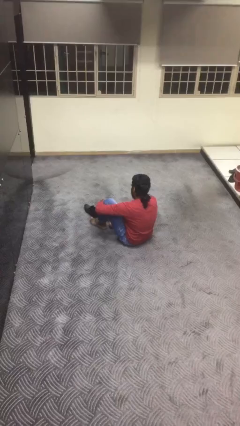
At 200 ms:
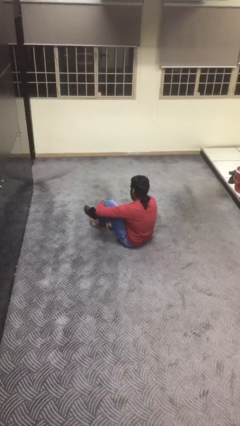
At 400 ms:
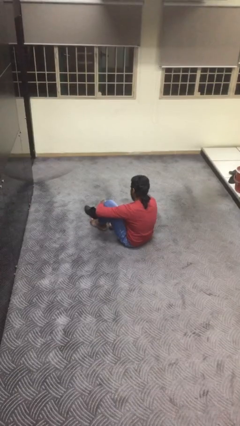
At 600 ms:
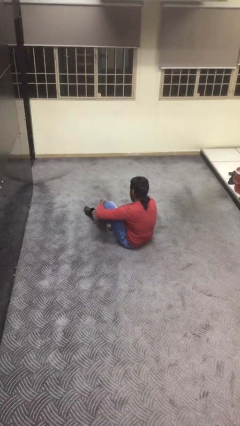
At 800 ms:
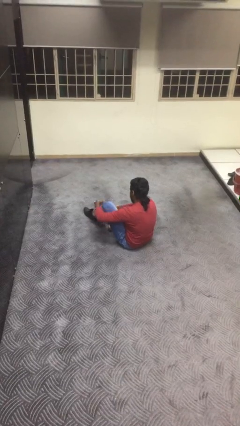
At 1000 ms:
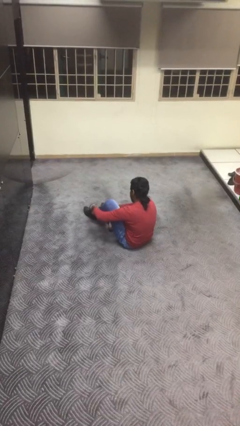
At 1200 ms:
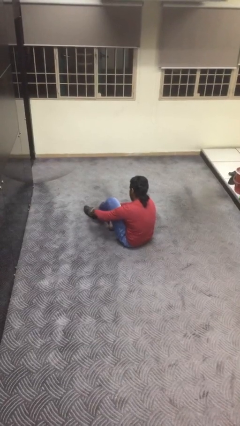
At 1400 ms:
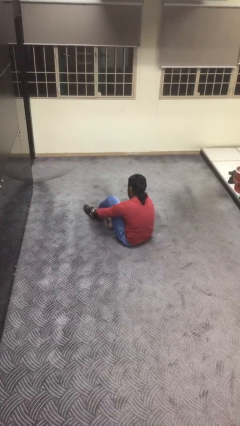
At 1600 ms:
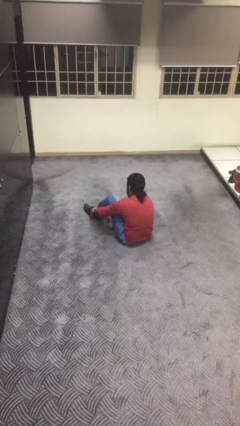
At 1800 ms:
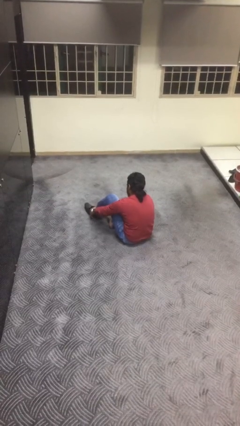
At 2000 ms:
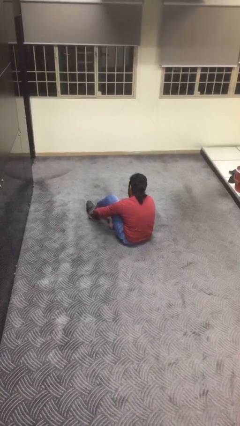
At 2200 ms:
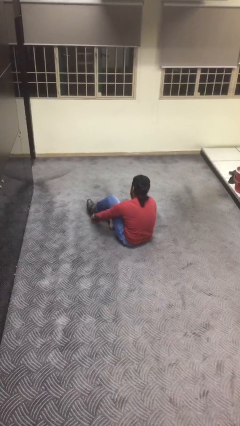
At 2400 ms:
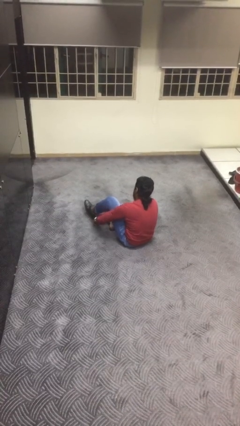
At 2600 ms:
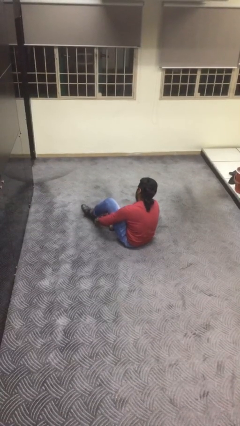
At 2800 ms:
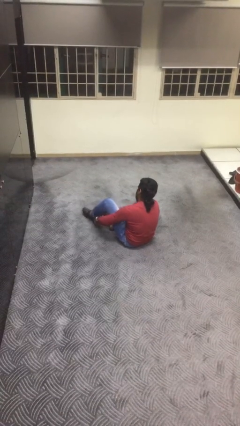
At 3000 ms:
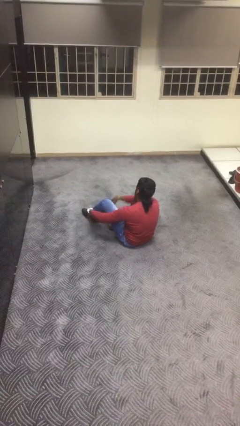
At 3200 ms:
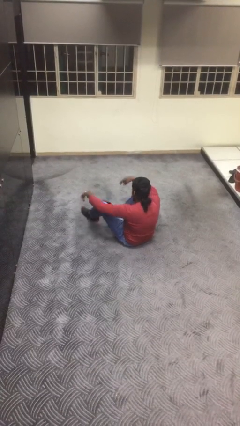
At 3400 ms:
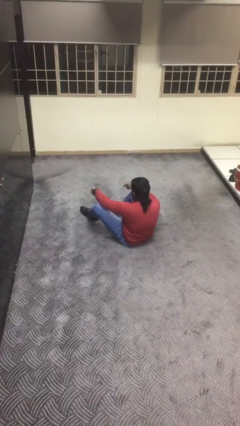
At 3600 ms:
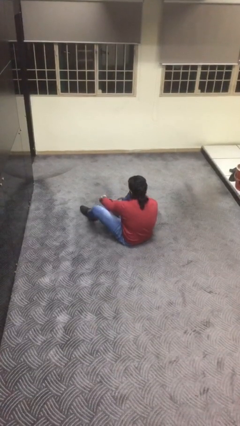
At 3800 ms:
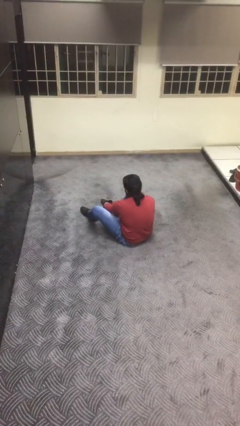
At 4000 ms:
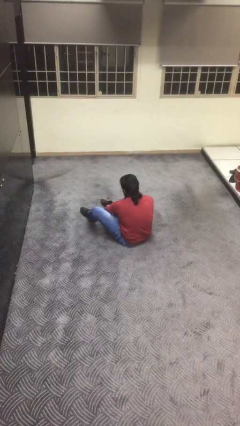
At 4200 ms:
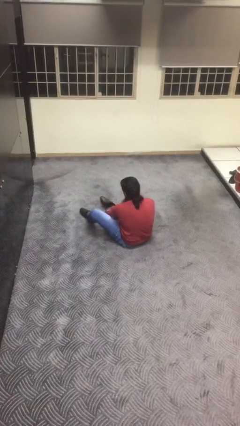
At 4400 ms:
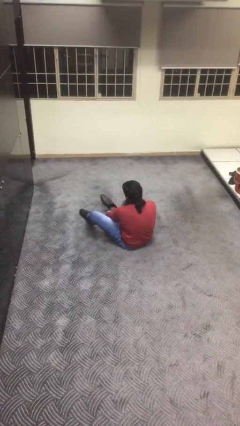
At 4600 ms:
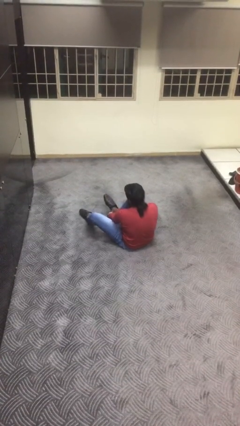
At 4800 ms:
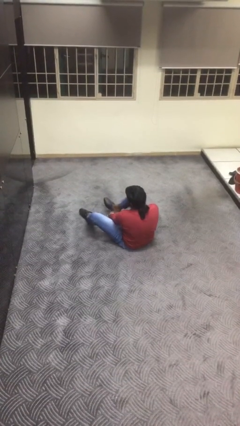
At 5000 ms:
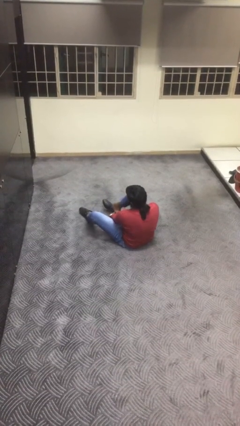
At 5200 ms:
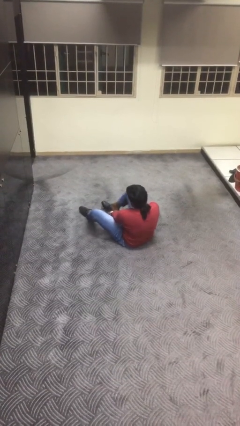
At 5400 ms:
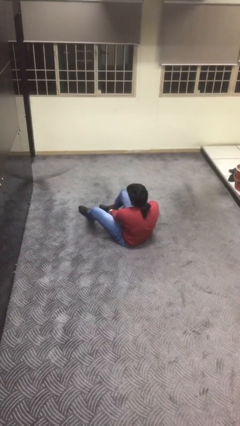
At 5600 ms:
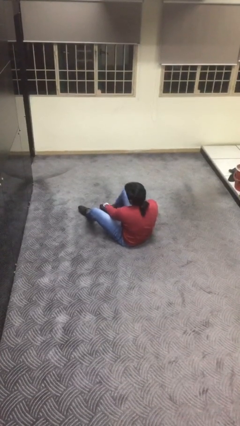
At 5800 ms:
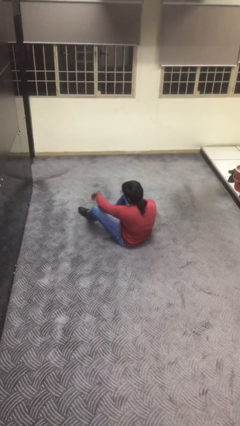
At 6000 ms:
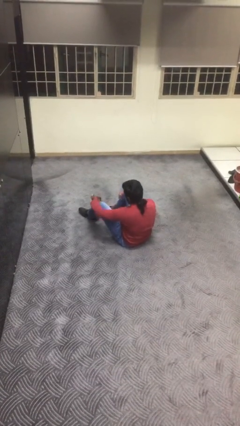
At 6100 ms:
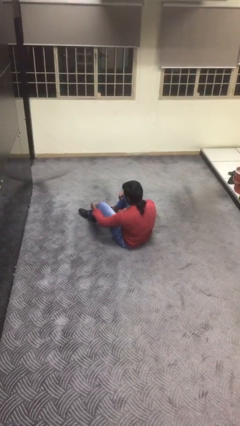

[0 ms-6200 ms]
person puts on shoes

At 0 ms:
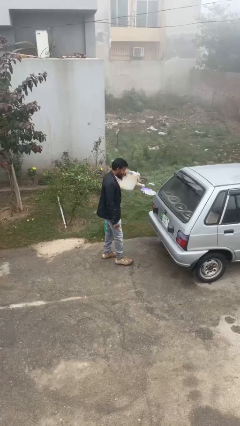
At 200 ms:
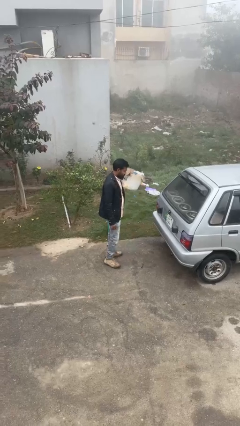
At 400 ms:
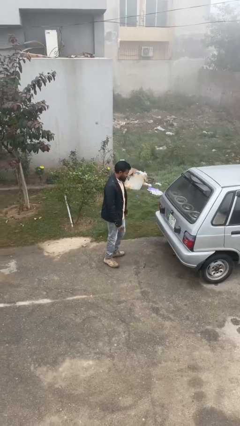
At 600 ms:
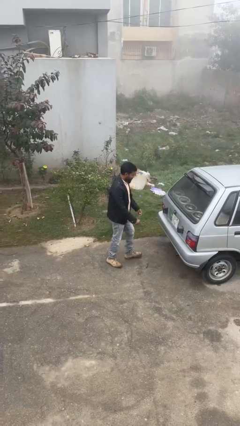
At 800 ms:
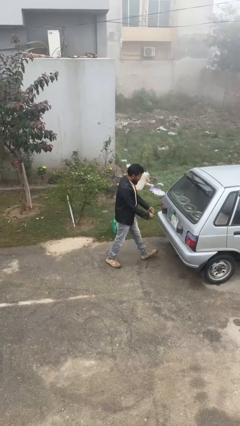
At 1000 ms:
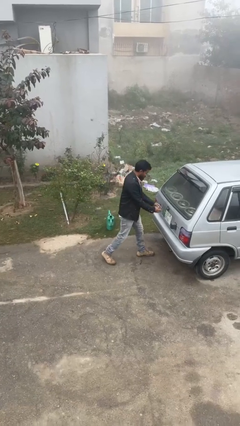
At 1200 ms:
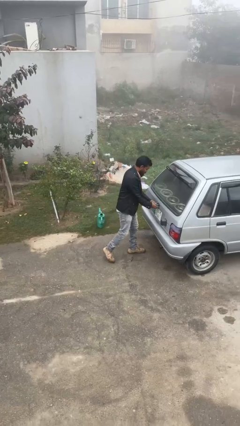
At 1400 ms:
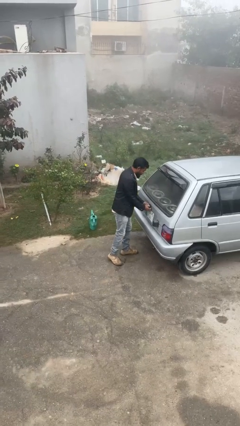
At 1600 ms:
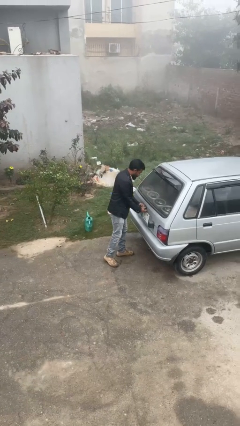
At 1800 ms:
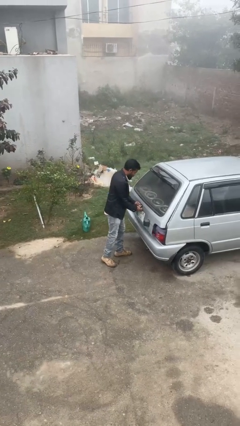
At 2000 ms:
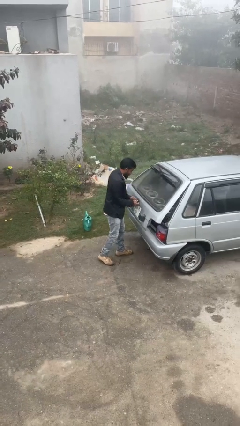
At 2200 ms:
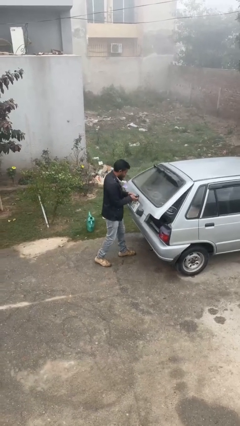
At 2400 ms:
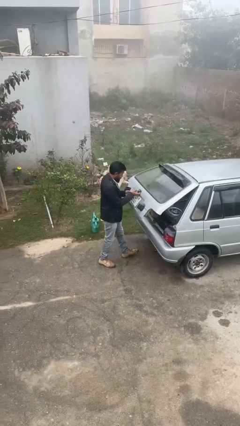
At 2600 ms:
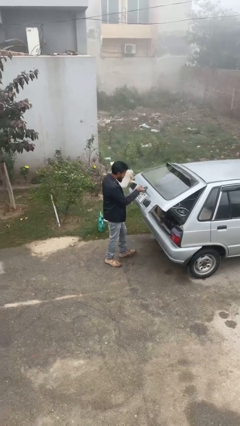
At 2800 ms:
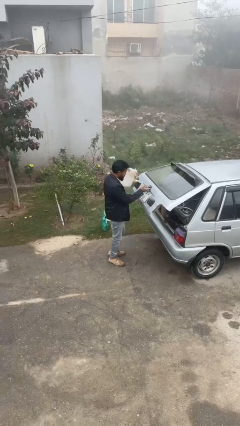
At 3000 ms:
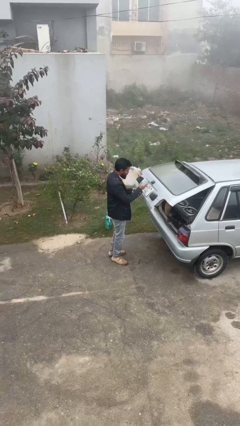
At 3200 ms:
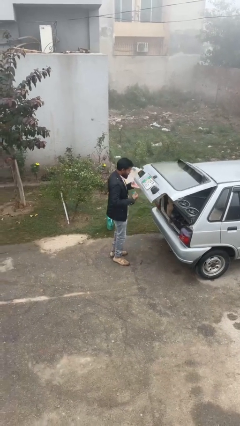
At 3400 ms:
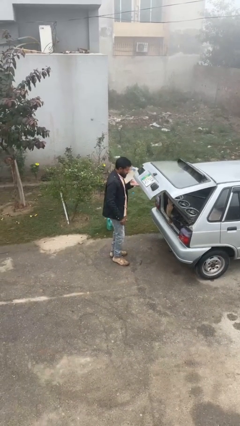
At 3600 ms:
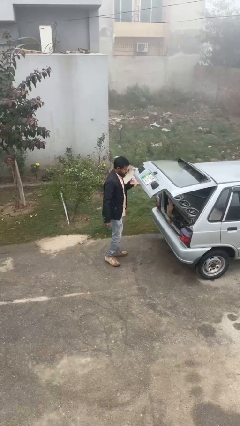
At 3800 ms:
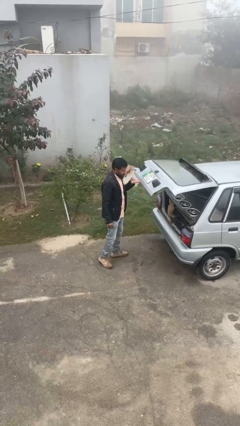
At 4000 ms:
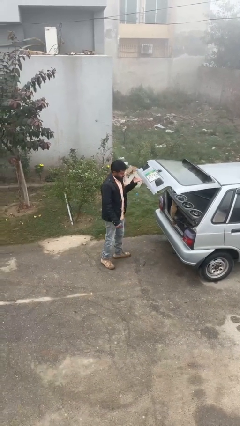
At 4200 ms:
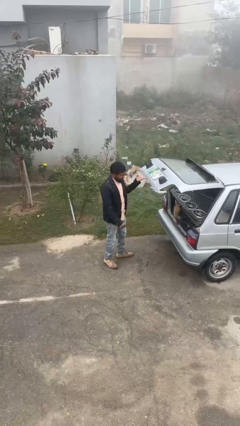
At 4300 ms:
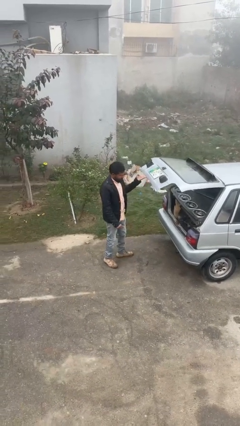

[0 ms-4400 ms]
person opens car trunk

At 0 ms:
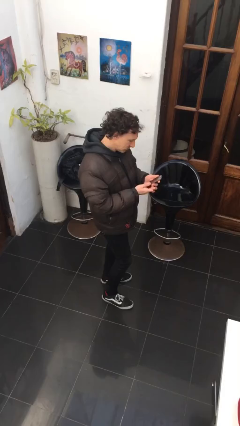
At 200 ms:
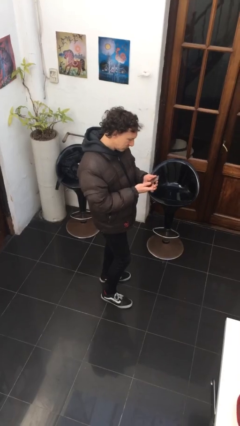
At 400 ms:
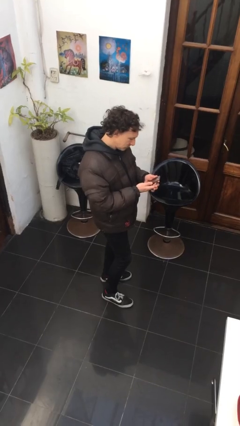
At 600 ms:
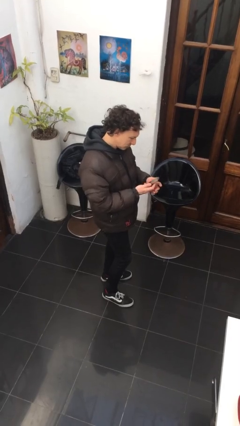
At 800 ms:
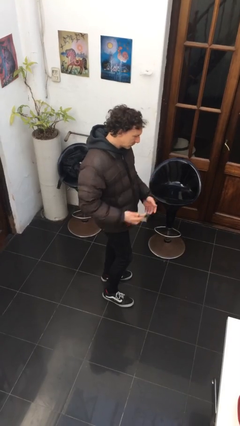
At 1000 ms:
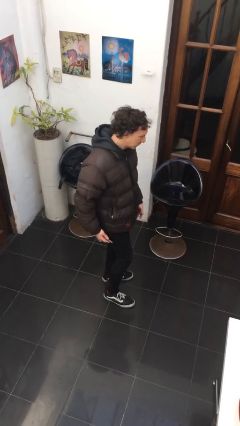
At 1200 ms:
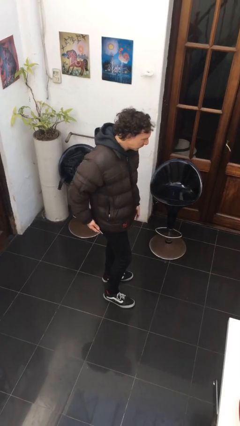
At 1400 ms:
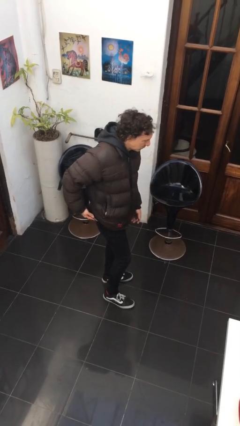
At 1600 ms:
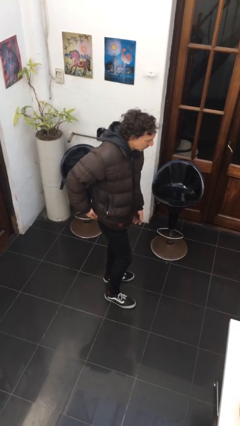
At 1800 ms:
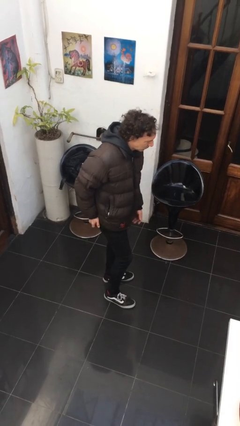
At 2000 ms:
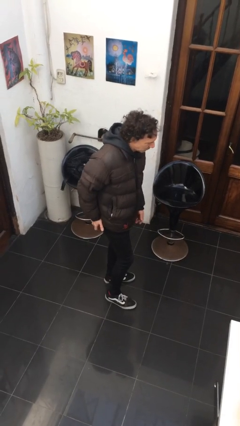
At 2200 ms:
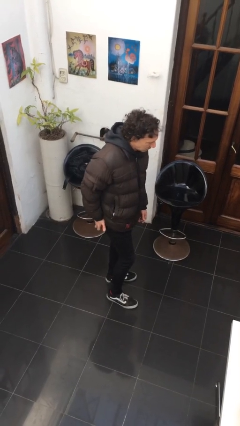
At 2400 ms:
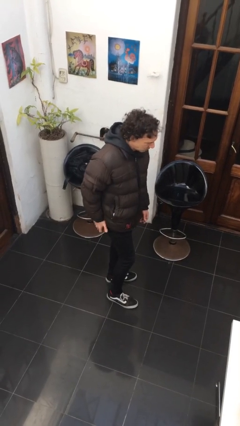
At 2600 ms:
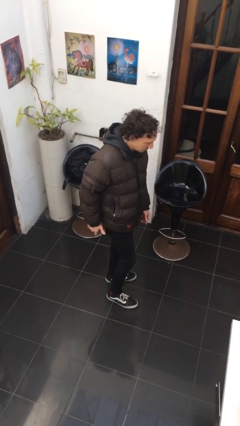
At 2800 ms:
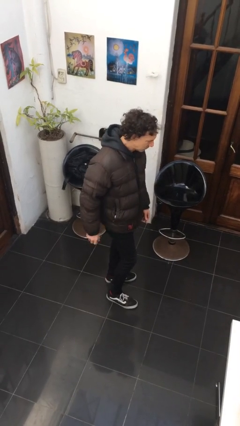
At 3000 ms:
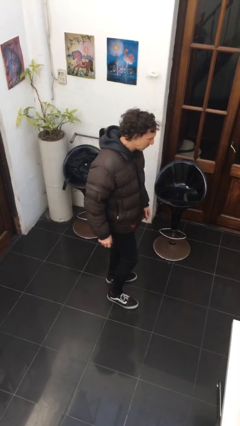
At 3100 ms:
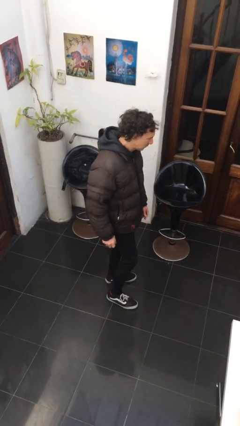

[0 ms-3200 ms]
person puts phone into pocket

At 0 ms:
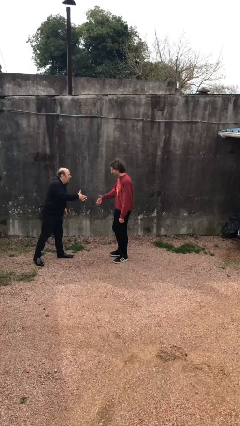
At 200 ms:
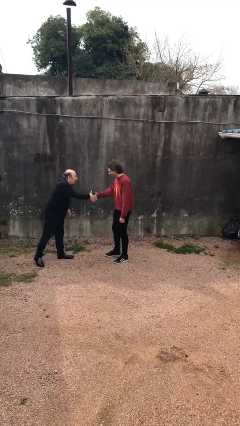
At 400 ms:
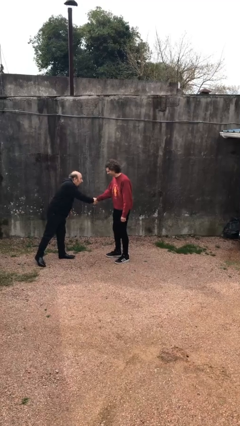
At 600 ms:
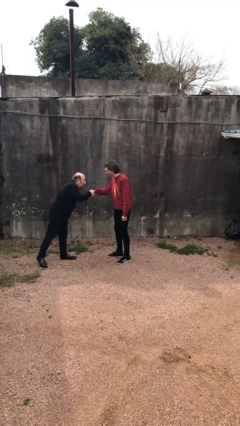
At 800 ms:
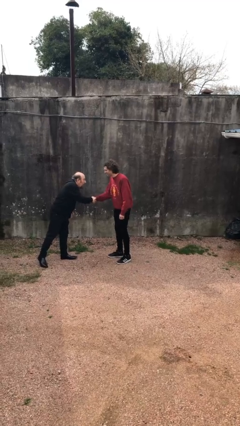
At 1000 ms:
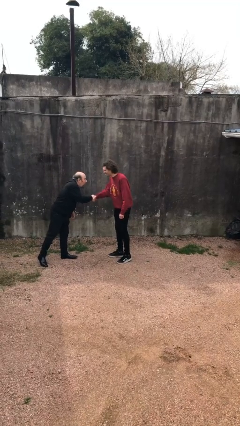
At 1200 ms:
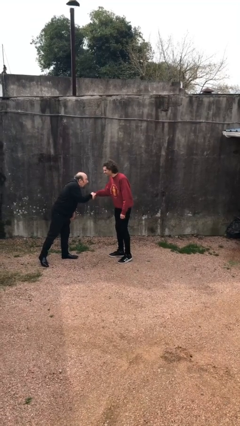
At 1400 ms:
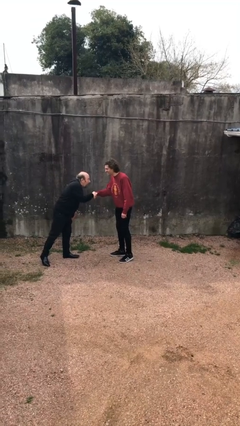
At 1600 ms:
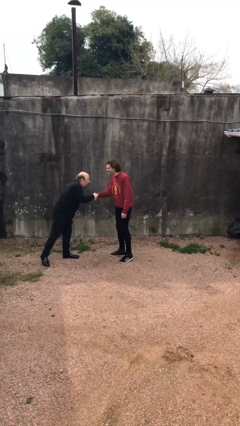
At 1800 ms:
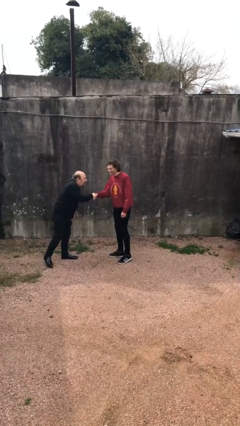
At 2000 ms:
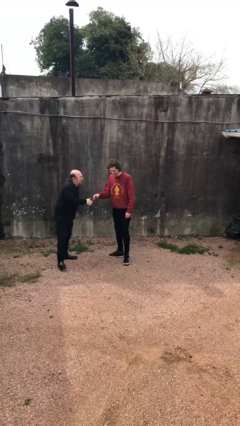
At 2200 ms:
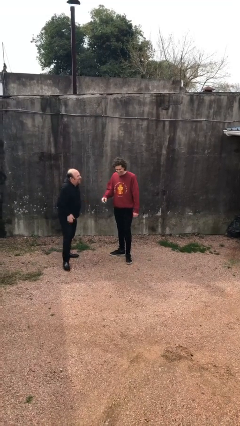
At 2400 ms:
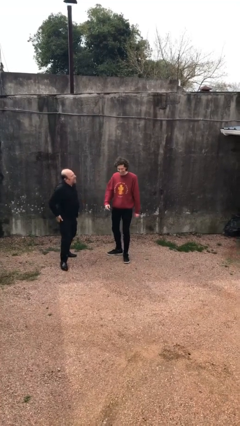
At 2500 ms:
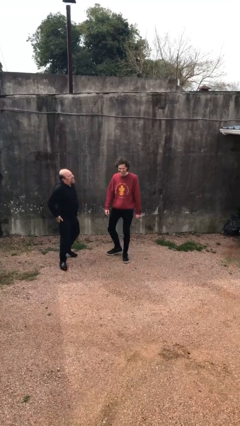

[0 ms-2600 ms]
person shakes hand

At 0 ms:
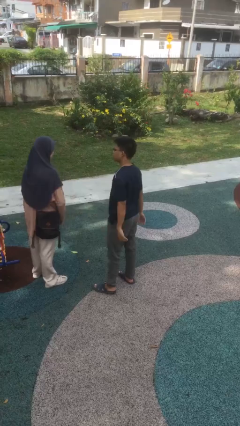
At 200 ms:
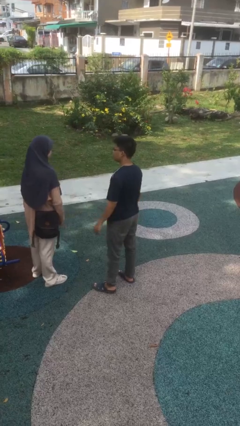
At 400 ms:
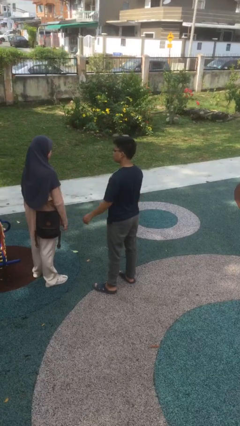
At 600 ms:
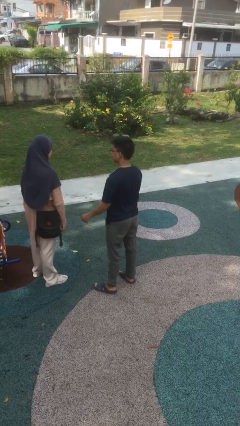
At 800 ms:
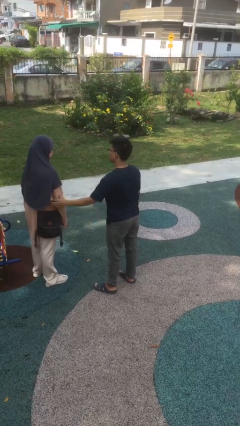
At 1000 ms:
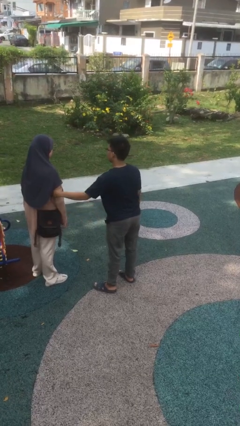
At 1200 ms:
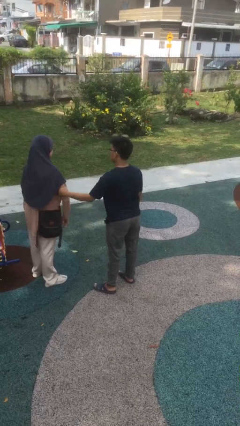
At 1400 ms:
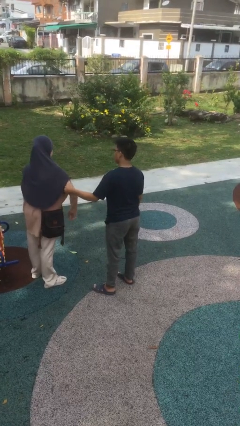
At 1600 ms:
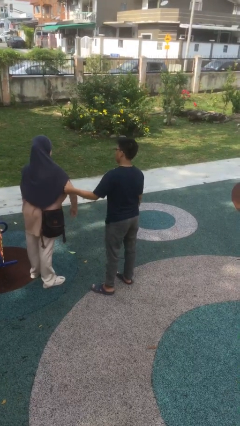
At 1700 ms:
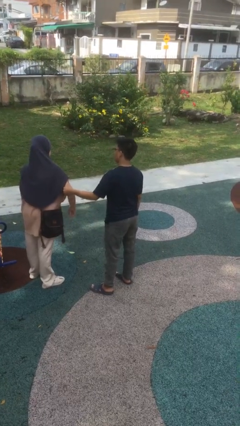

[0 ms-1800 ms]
person grabs person by bicep
